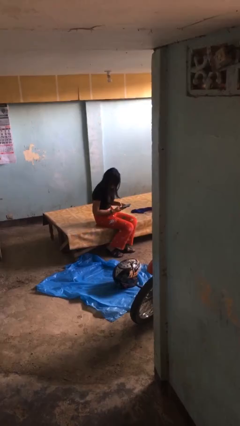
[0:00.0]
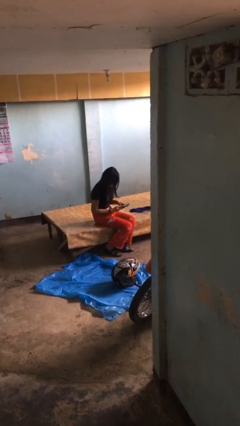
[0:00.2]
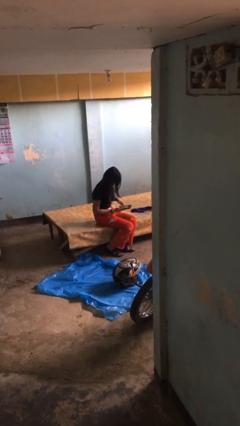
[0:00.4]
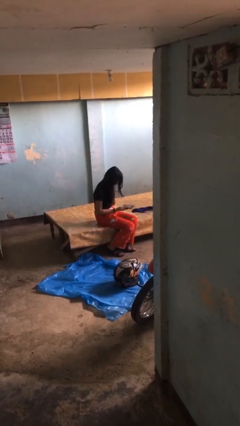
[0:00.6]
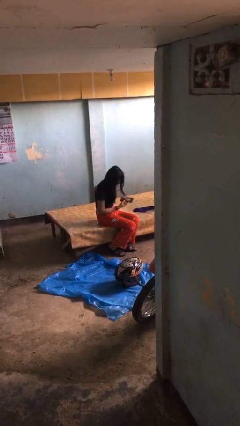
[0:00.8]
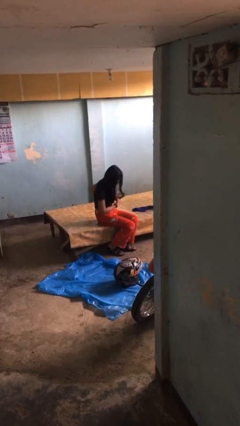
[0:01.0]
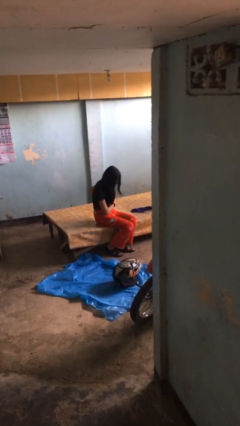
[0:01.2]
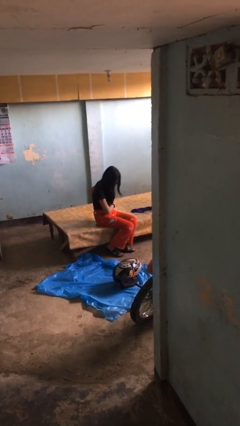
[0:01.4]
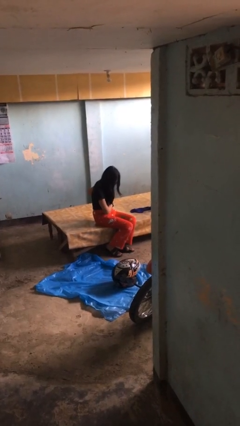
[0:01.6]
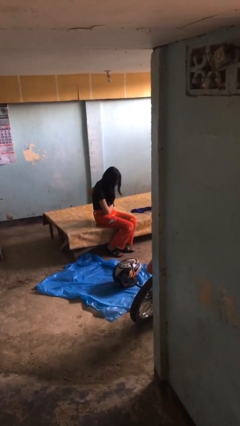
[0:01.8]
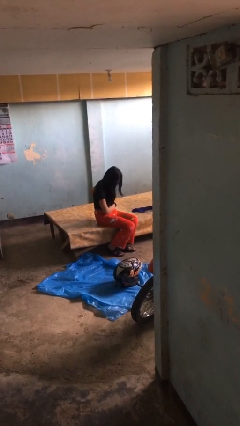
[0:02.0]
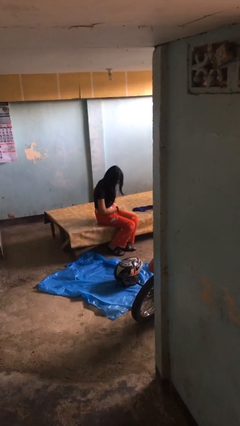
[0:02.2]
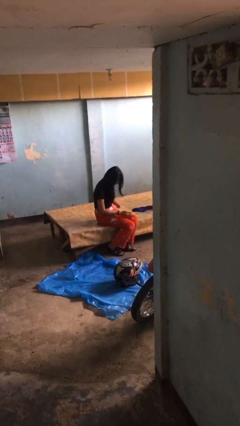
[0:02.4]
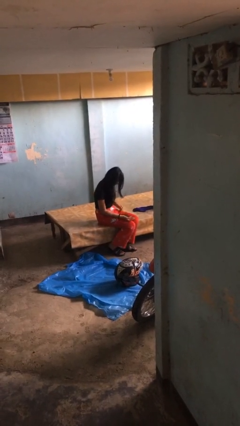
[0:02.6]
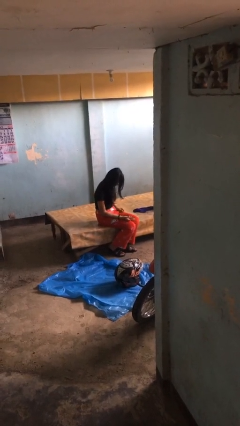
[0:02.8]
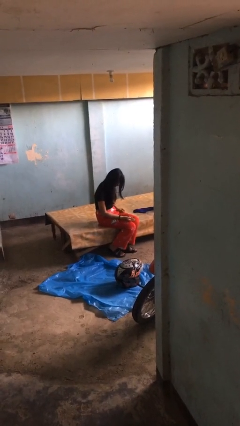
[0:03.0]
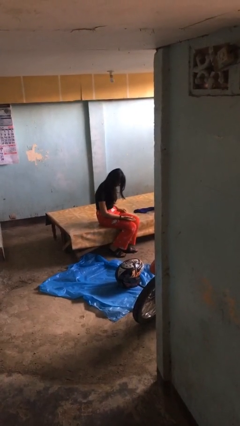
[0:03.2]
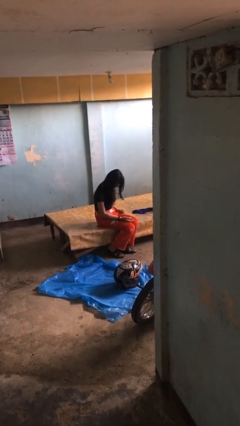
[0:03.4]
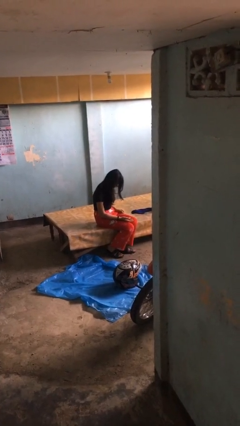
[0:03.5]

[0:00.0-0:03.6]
person puts phone into pocket

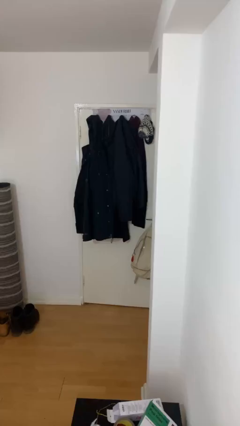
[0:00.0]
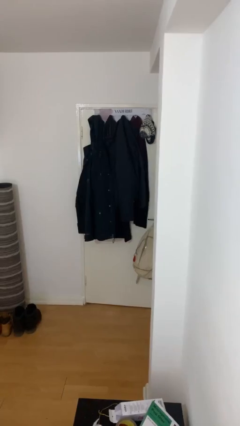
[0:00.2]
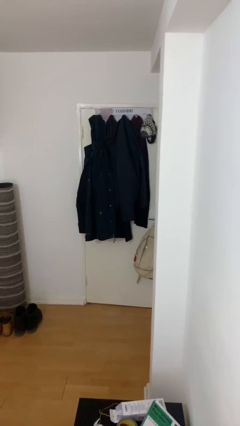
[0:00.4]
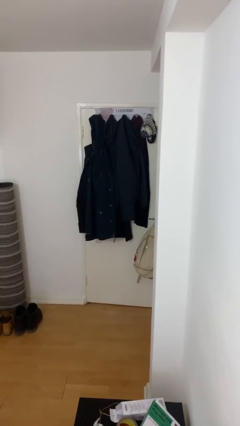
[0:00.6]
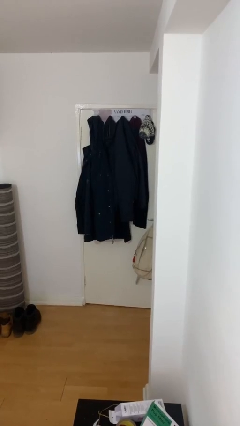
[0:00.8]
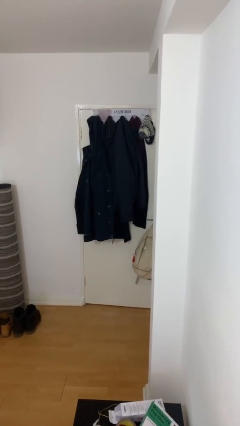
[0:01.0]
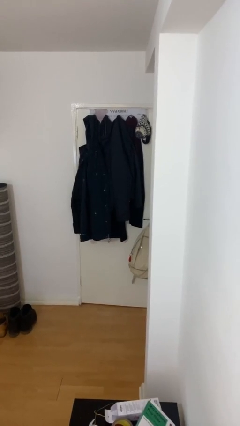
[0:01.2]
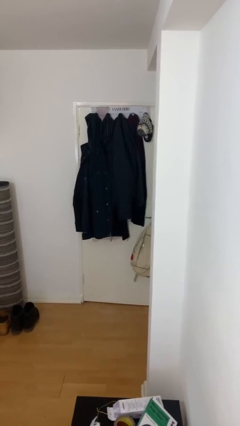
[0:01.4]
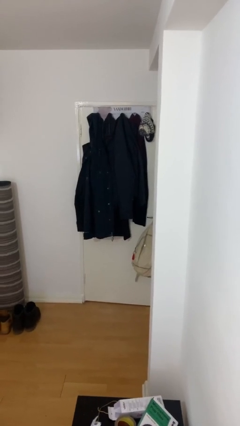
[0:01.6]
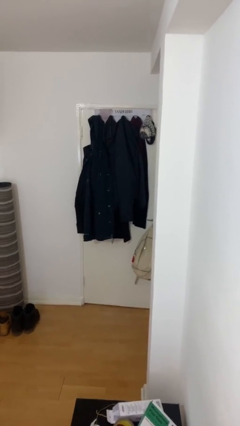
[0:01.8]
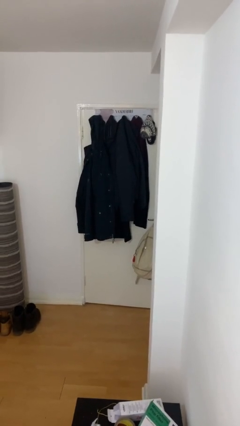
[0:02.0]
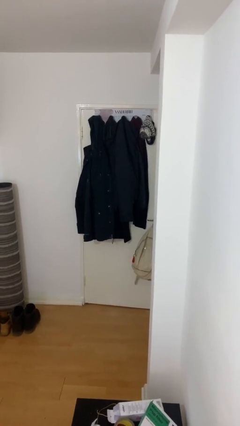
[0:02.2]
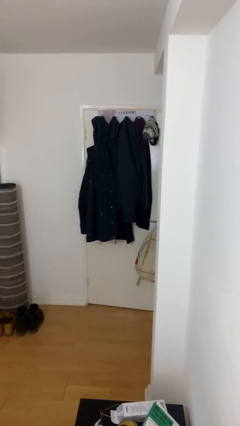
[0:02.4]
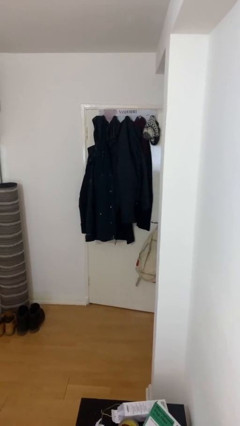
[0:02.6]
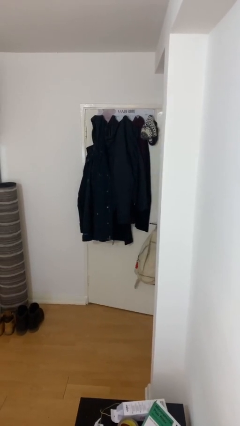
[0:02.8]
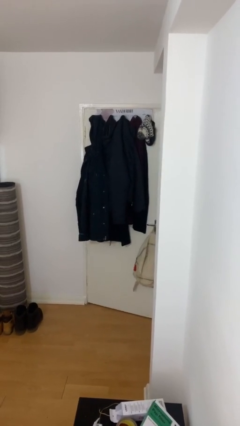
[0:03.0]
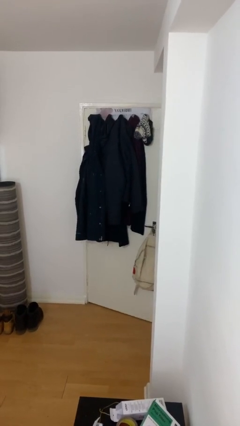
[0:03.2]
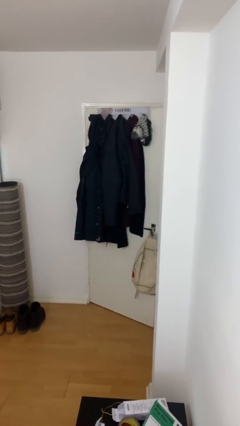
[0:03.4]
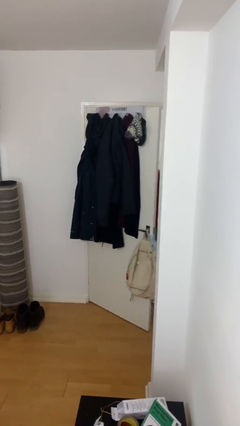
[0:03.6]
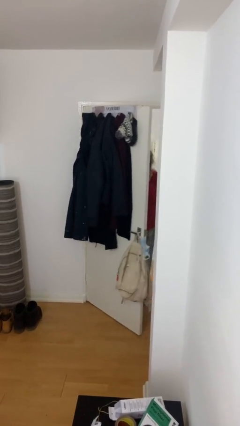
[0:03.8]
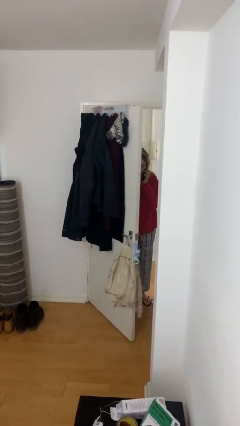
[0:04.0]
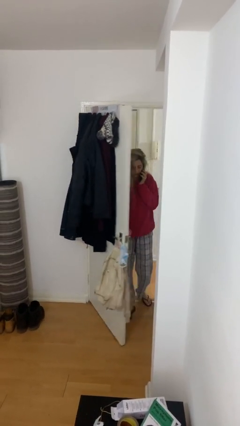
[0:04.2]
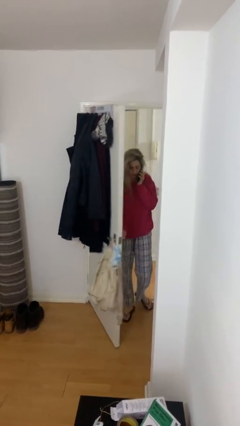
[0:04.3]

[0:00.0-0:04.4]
person opens facility door

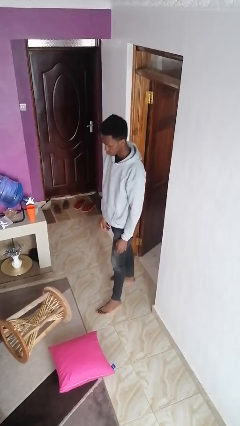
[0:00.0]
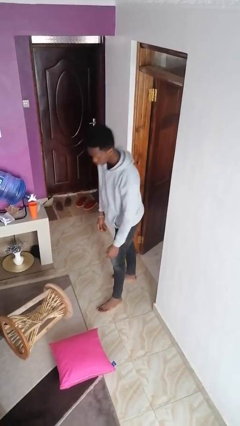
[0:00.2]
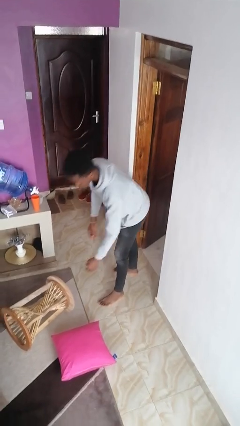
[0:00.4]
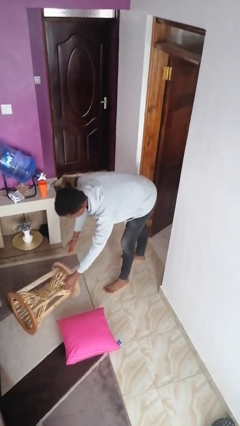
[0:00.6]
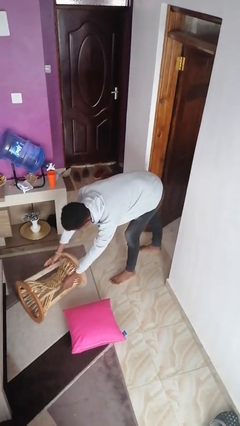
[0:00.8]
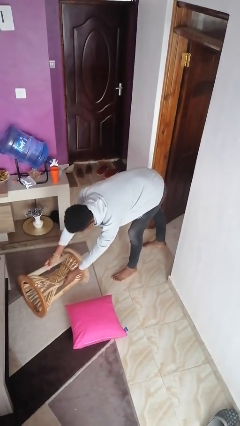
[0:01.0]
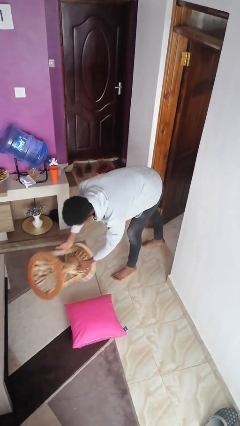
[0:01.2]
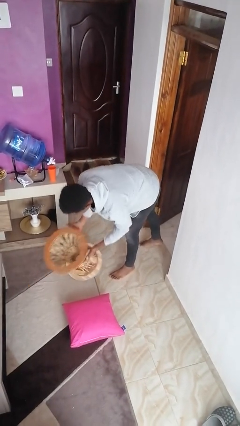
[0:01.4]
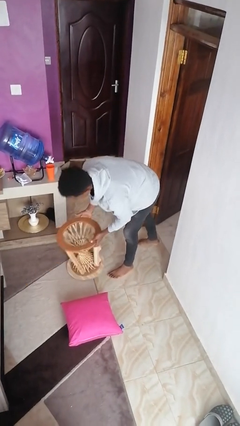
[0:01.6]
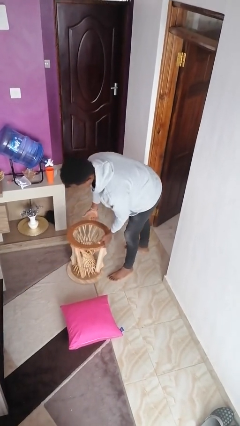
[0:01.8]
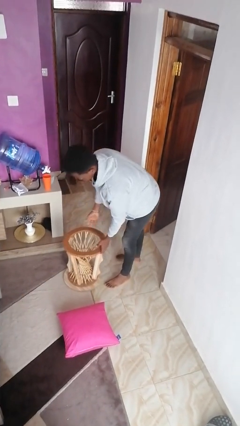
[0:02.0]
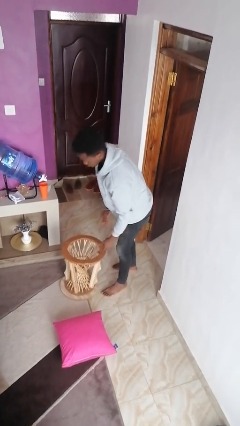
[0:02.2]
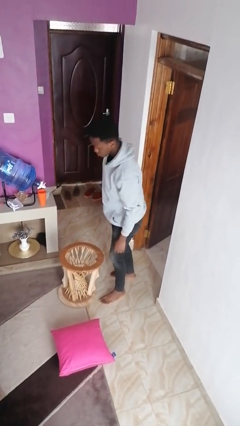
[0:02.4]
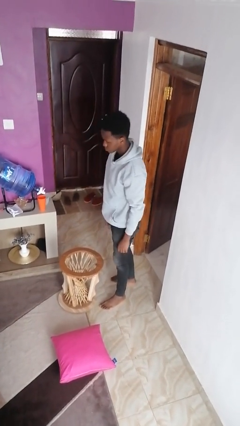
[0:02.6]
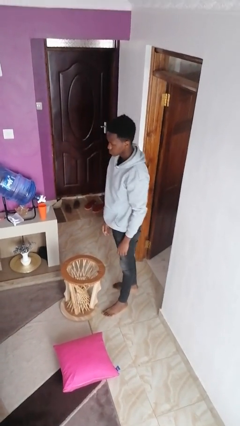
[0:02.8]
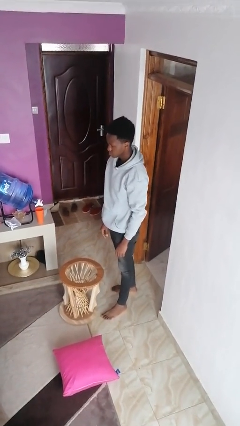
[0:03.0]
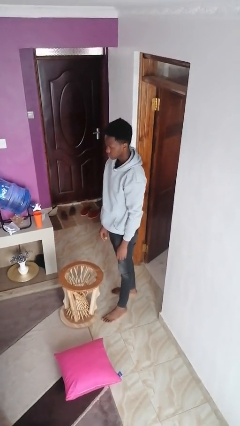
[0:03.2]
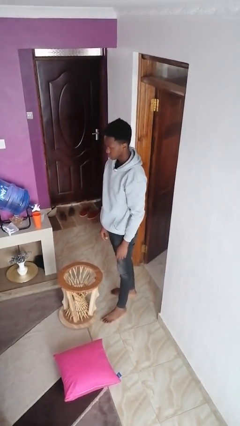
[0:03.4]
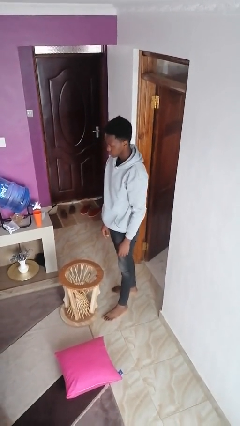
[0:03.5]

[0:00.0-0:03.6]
person sets upright furniture

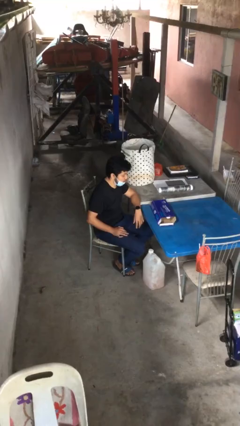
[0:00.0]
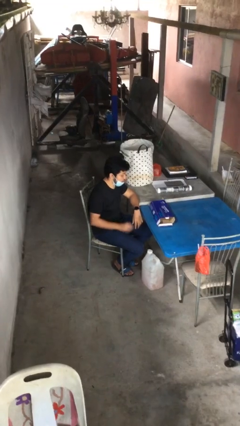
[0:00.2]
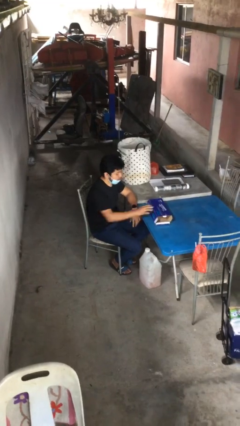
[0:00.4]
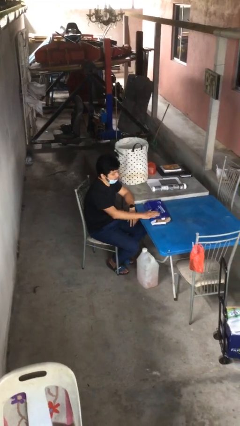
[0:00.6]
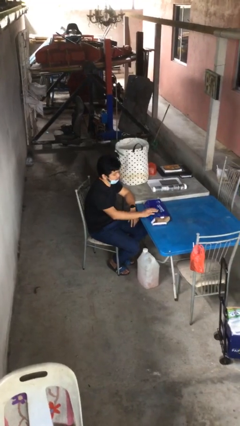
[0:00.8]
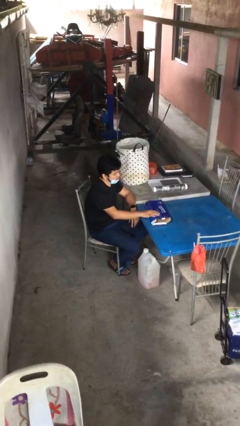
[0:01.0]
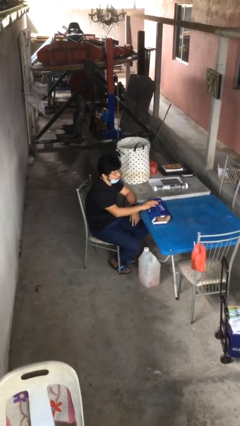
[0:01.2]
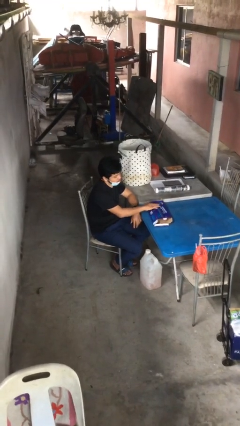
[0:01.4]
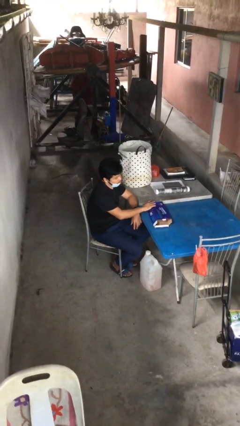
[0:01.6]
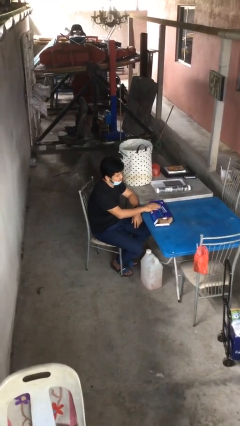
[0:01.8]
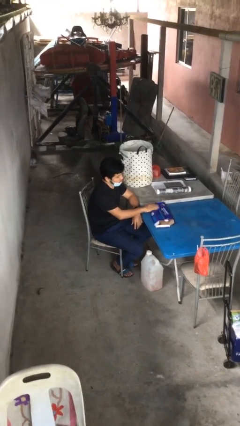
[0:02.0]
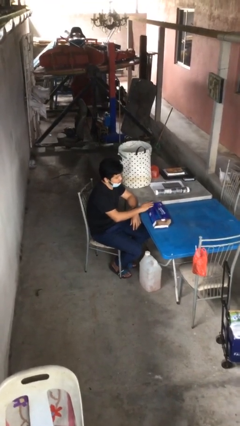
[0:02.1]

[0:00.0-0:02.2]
person taps object with finger

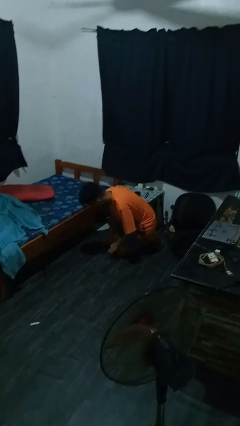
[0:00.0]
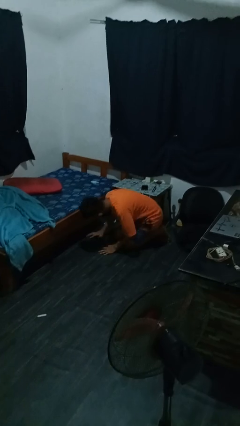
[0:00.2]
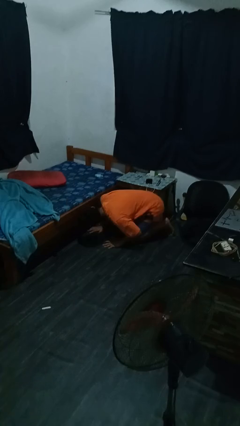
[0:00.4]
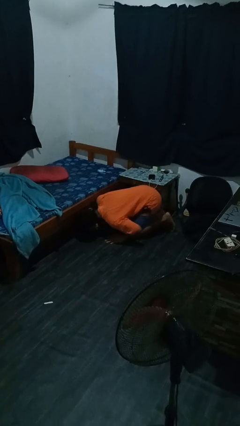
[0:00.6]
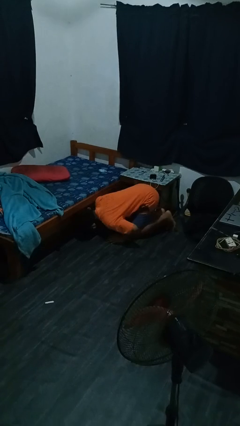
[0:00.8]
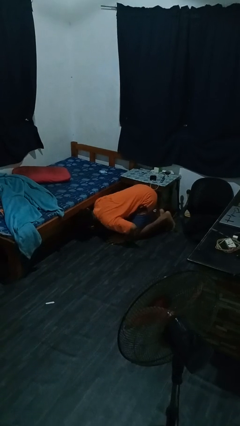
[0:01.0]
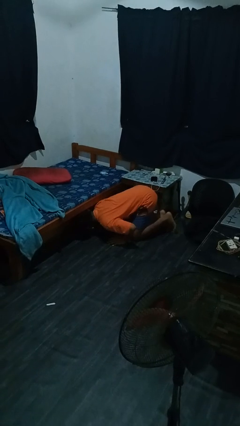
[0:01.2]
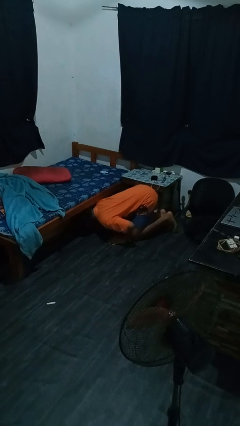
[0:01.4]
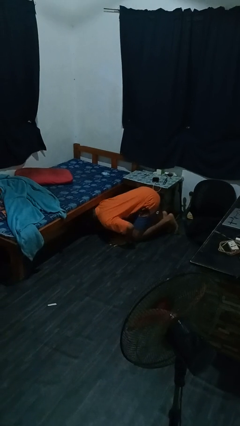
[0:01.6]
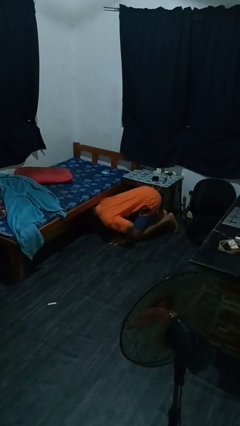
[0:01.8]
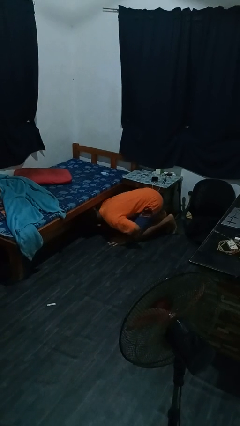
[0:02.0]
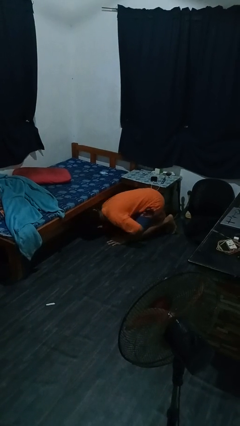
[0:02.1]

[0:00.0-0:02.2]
person searches under bed

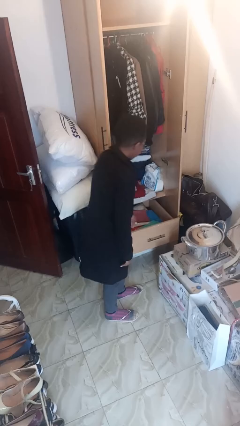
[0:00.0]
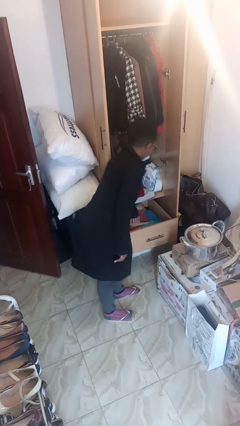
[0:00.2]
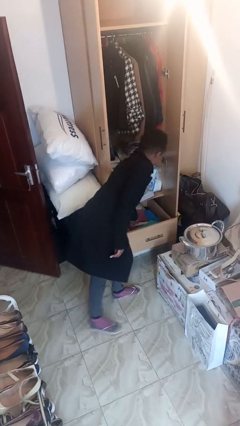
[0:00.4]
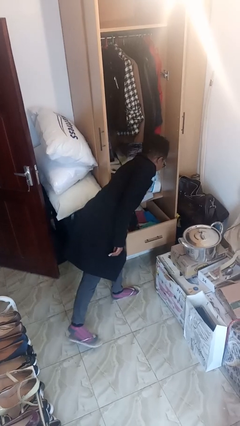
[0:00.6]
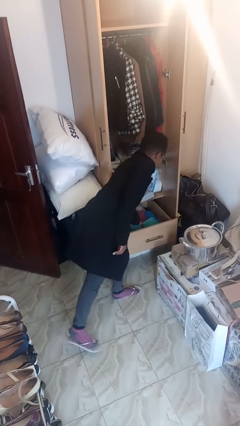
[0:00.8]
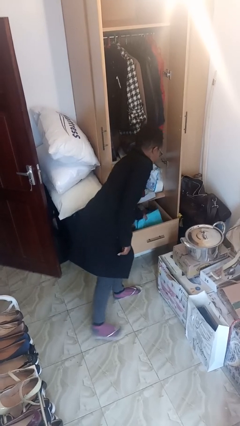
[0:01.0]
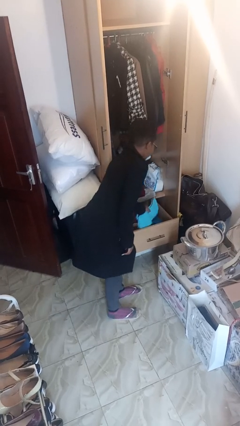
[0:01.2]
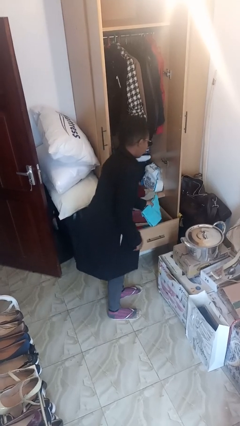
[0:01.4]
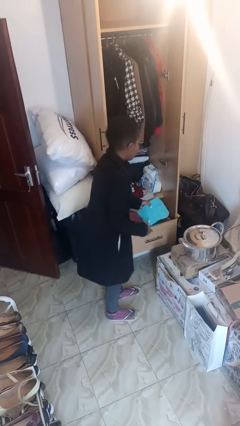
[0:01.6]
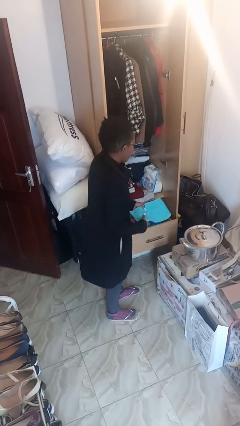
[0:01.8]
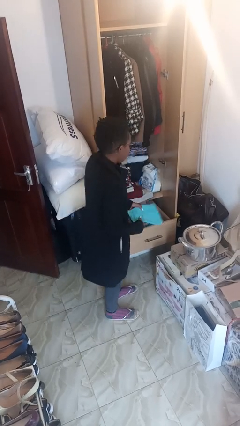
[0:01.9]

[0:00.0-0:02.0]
person takes clothes from dresser
